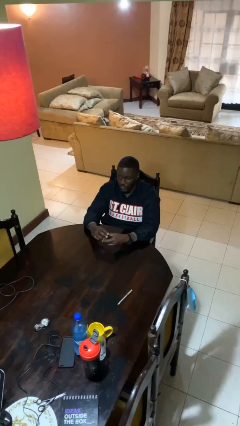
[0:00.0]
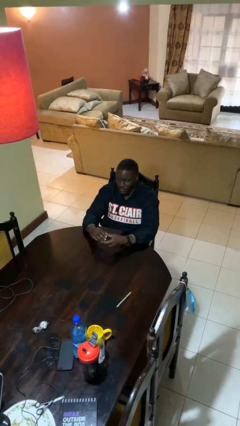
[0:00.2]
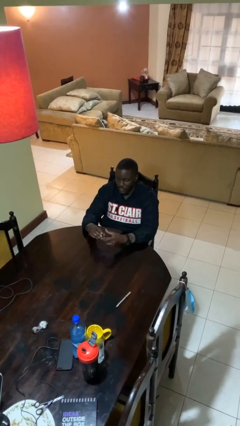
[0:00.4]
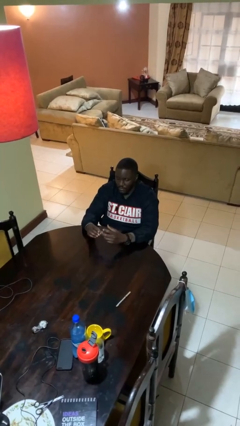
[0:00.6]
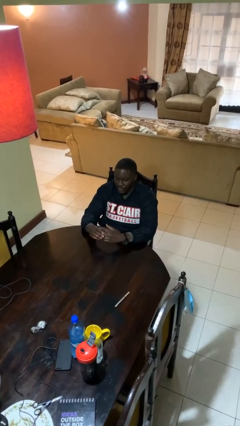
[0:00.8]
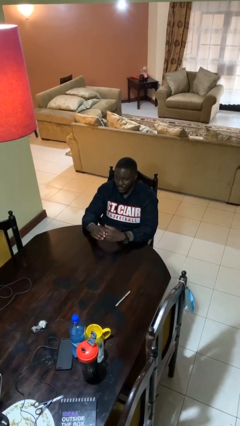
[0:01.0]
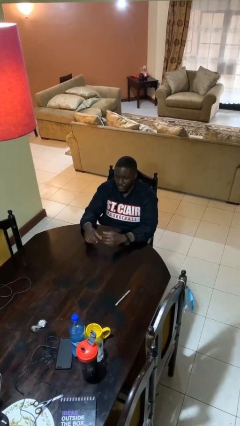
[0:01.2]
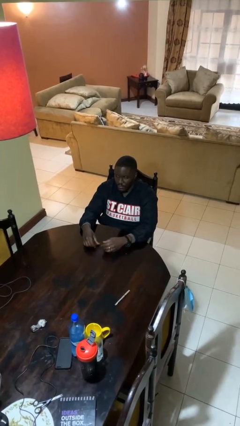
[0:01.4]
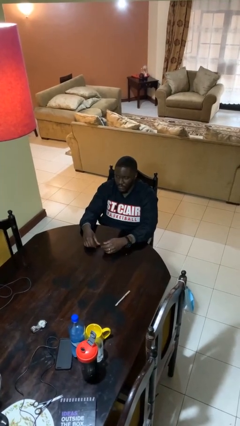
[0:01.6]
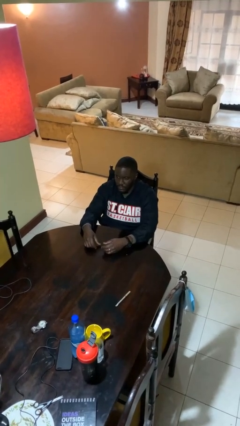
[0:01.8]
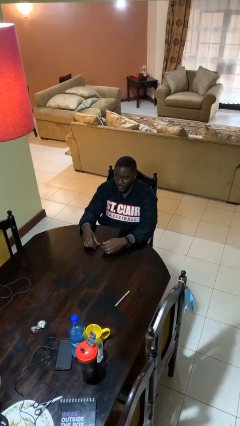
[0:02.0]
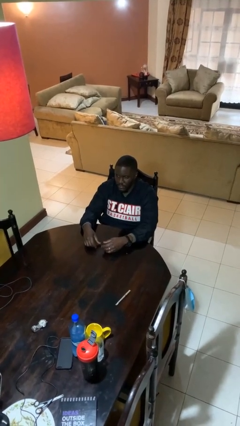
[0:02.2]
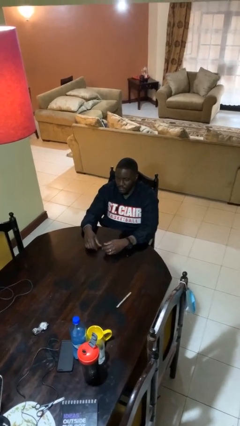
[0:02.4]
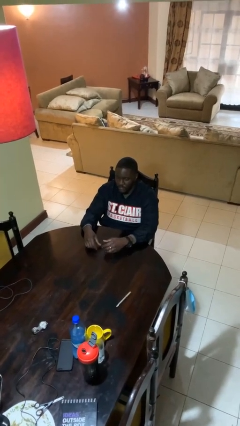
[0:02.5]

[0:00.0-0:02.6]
person puts on ring

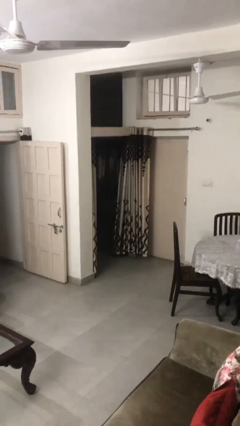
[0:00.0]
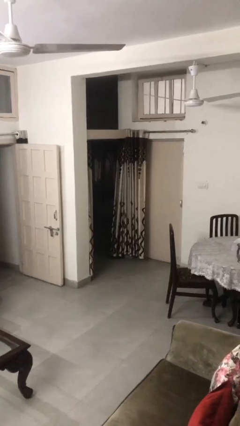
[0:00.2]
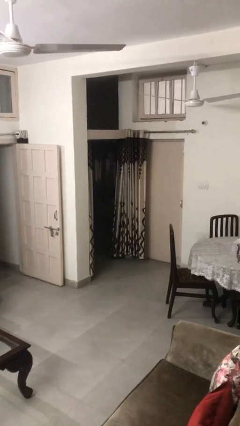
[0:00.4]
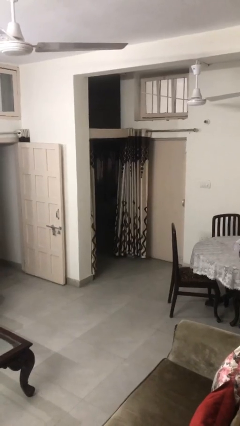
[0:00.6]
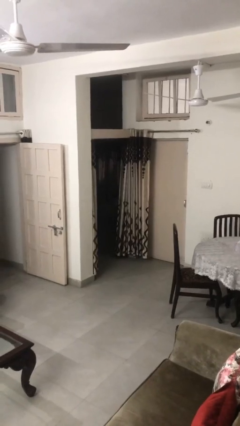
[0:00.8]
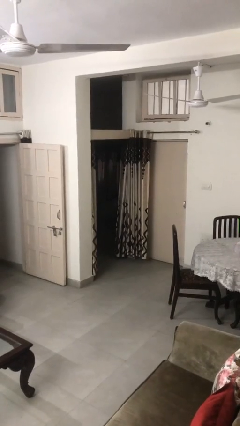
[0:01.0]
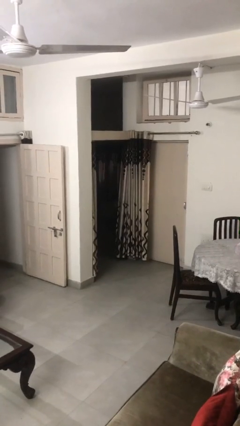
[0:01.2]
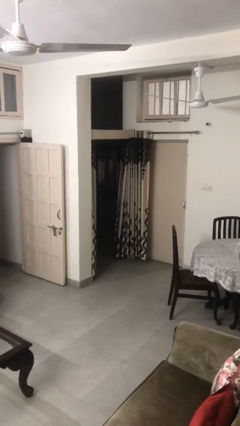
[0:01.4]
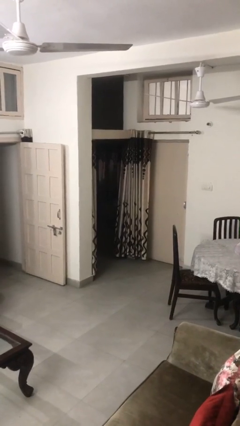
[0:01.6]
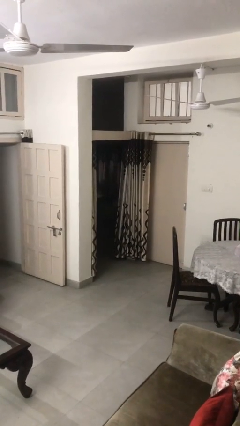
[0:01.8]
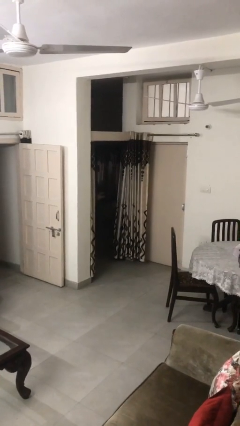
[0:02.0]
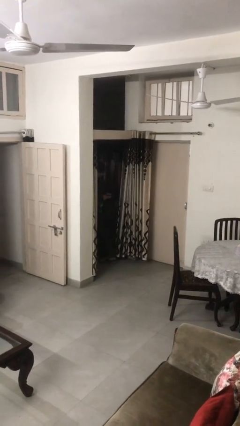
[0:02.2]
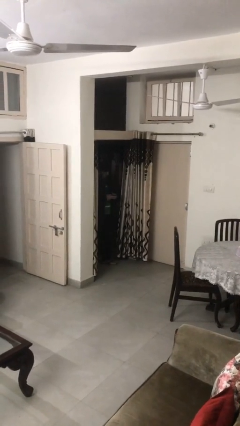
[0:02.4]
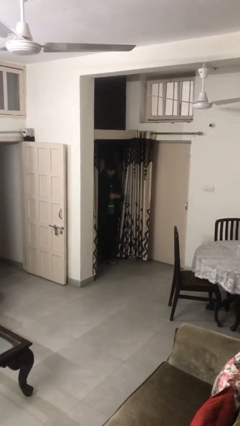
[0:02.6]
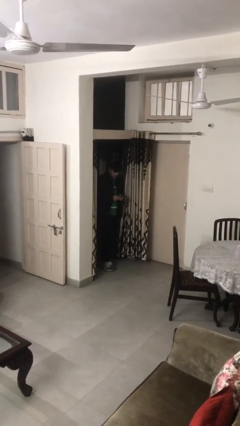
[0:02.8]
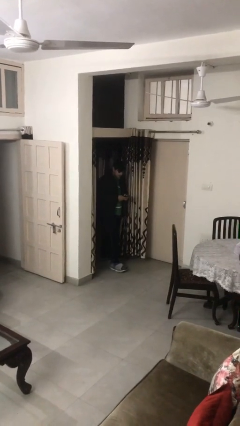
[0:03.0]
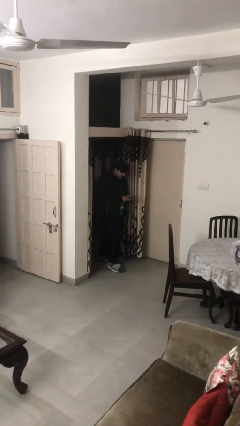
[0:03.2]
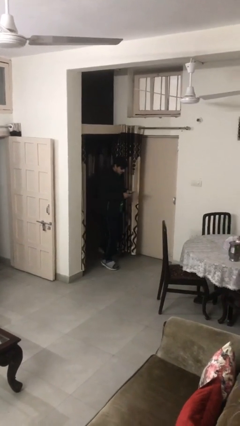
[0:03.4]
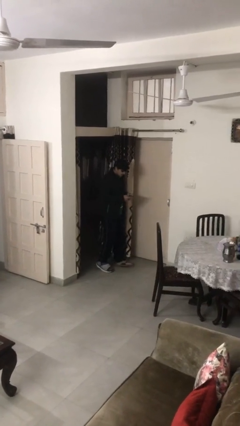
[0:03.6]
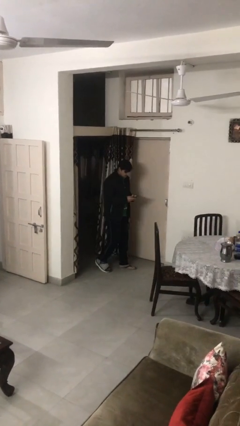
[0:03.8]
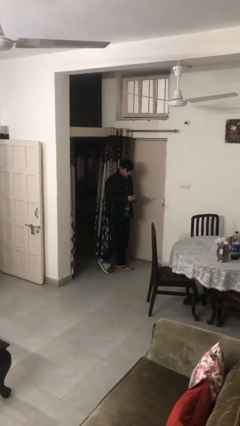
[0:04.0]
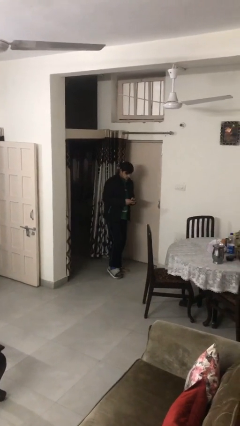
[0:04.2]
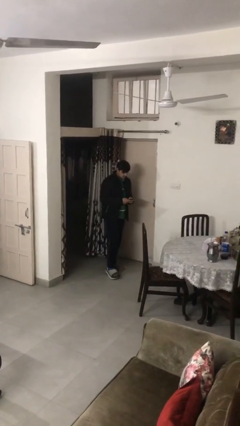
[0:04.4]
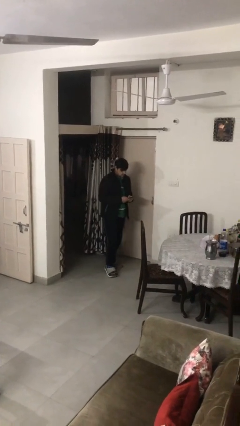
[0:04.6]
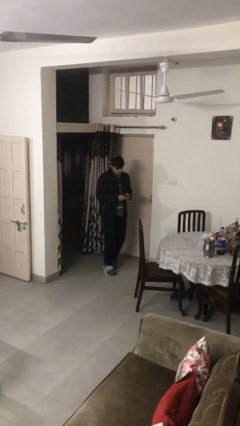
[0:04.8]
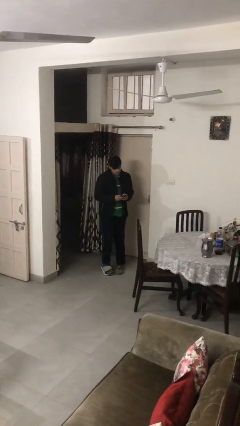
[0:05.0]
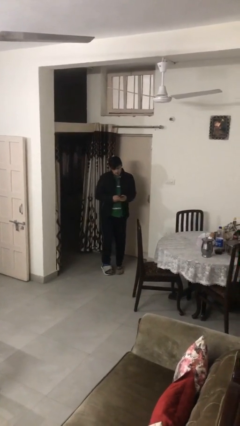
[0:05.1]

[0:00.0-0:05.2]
person enters scene through structure

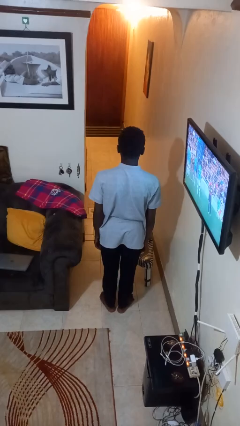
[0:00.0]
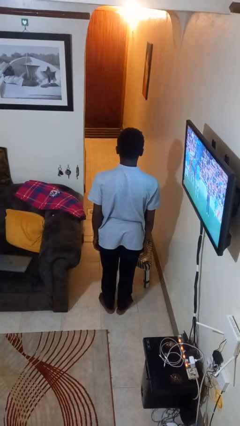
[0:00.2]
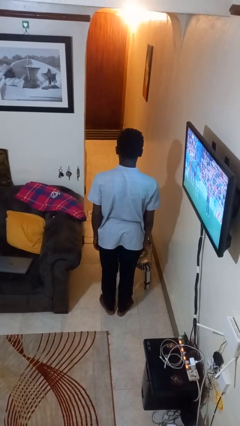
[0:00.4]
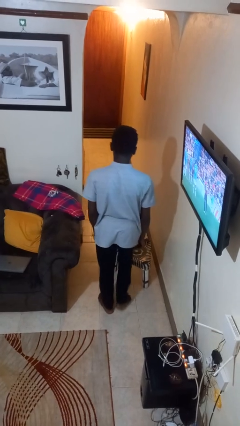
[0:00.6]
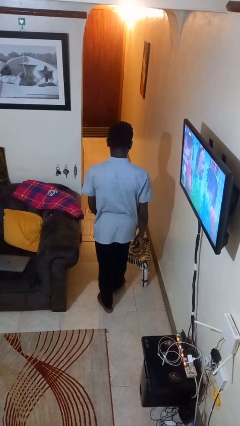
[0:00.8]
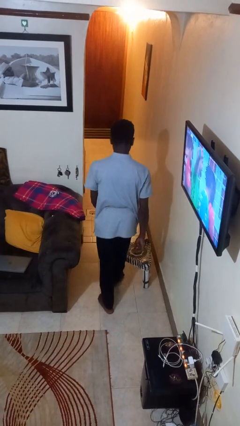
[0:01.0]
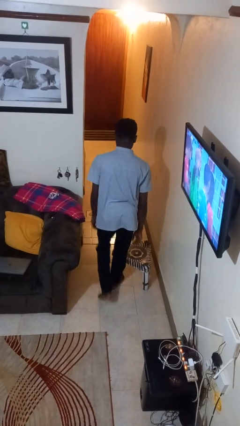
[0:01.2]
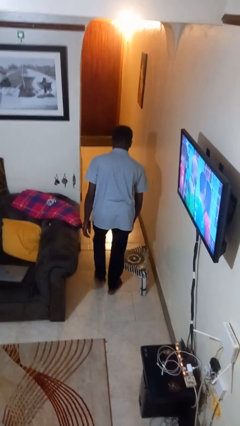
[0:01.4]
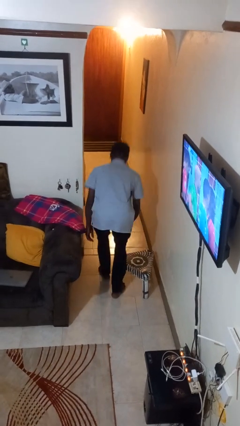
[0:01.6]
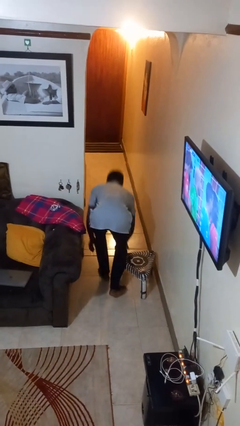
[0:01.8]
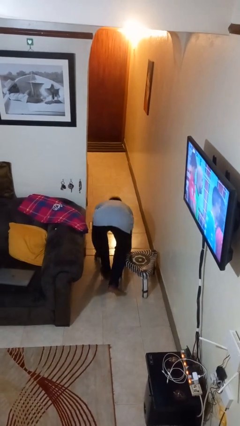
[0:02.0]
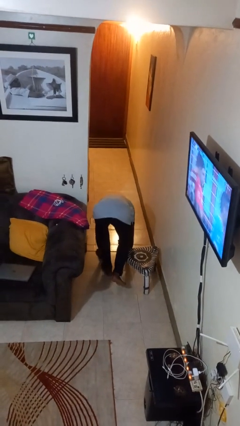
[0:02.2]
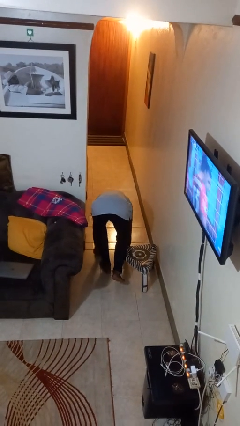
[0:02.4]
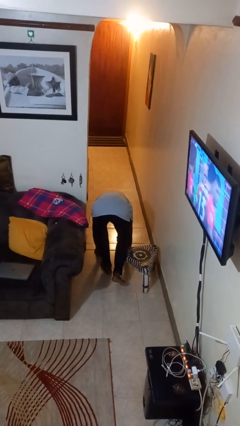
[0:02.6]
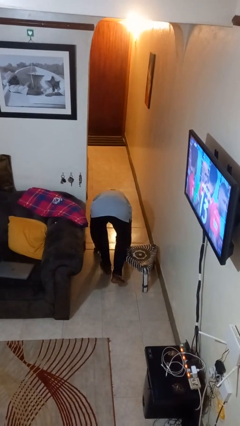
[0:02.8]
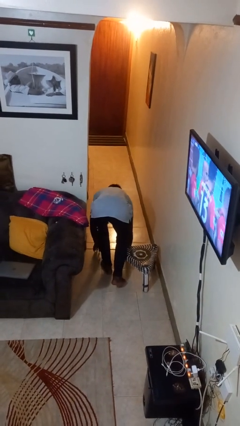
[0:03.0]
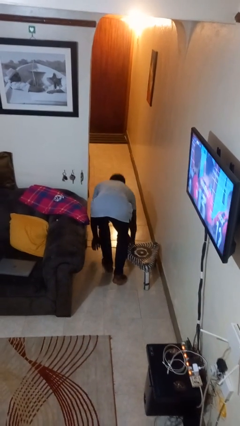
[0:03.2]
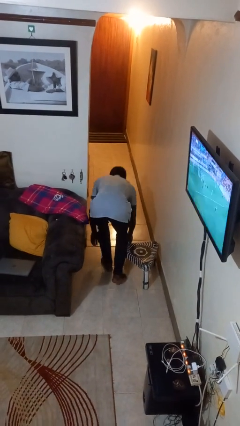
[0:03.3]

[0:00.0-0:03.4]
person trips on object on floor

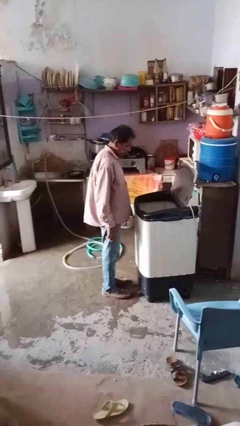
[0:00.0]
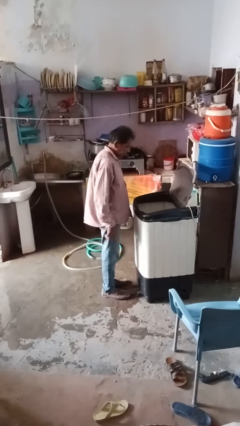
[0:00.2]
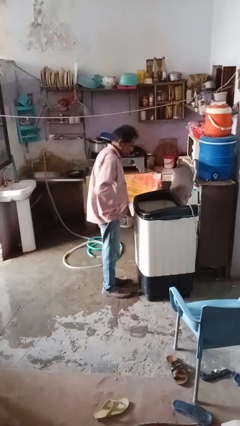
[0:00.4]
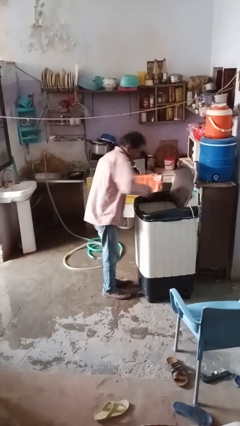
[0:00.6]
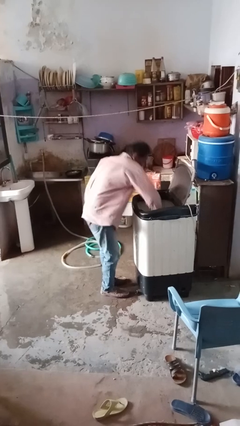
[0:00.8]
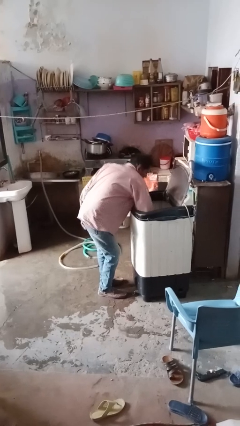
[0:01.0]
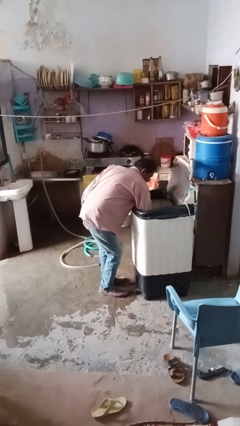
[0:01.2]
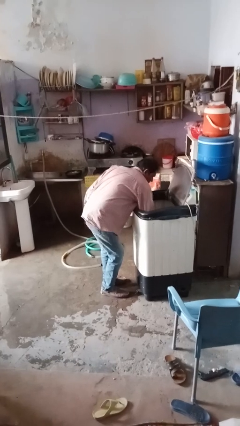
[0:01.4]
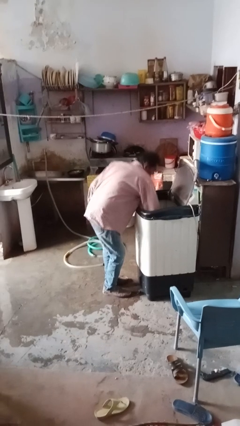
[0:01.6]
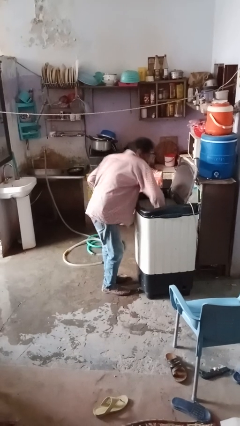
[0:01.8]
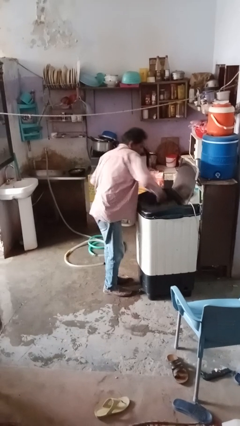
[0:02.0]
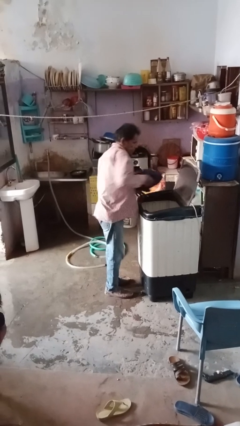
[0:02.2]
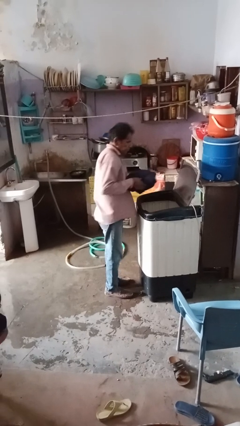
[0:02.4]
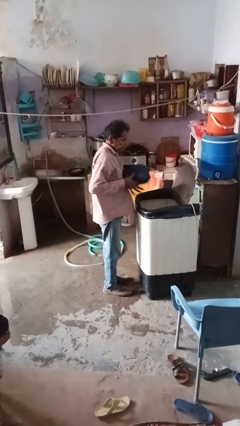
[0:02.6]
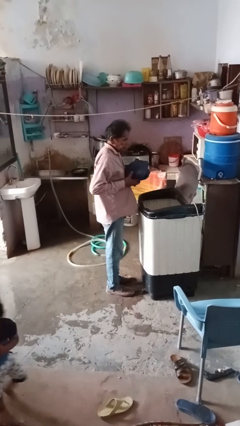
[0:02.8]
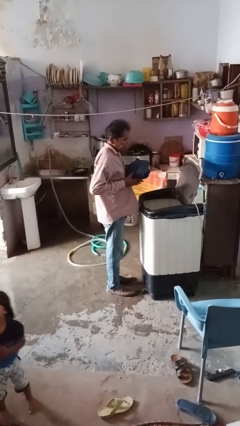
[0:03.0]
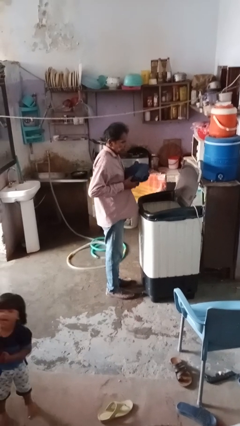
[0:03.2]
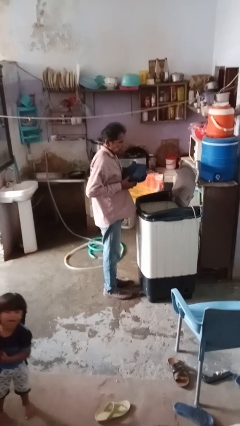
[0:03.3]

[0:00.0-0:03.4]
person unloads clotheswasher

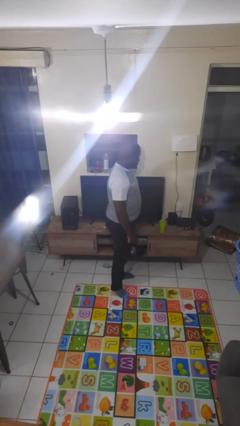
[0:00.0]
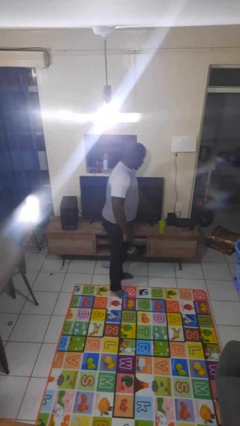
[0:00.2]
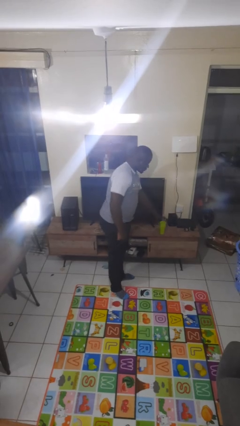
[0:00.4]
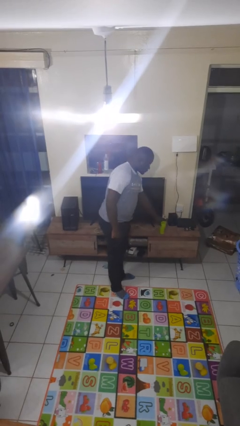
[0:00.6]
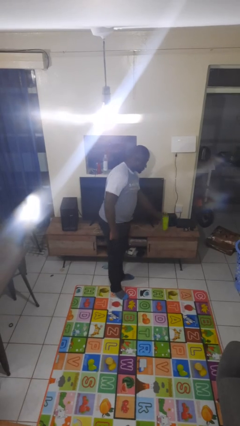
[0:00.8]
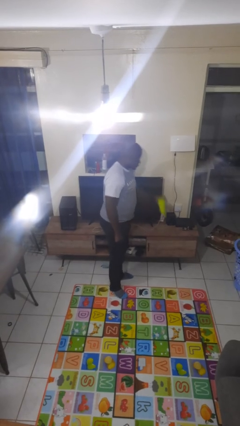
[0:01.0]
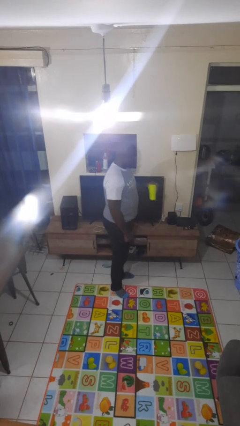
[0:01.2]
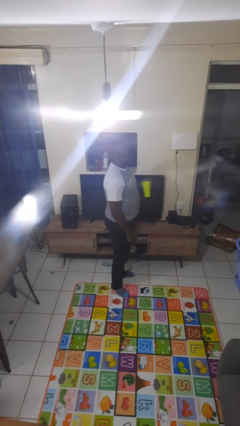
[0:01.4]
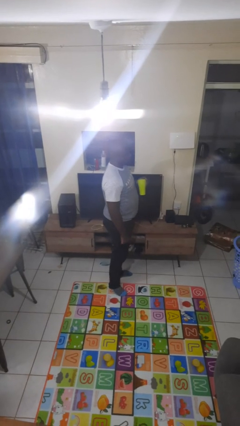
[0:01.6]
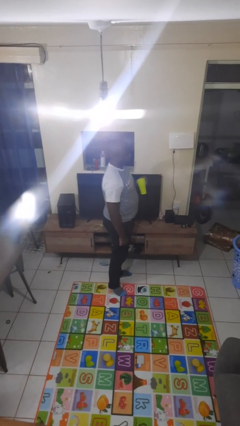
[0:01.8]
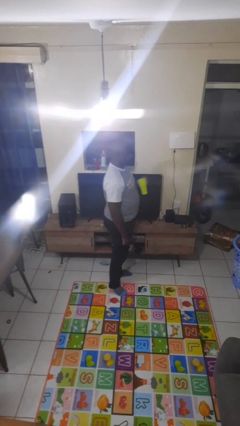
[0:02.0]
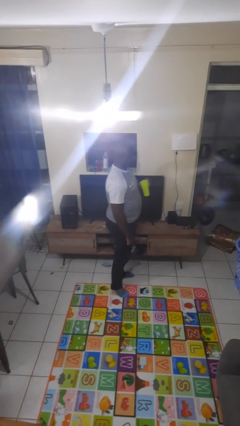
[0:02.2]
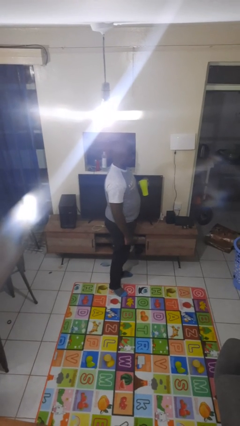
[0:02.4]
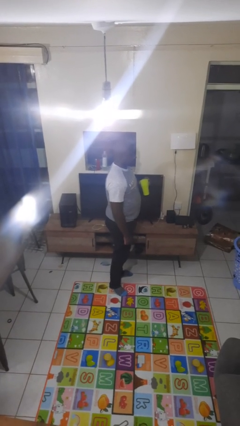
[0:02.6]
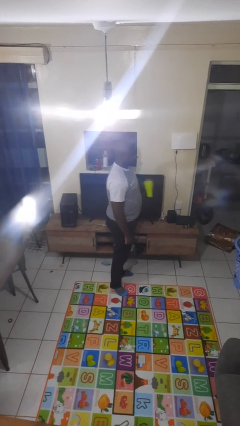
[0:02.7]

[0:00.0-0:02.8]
person picks up object from countertop

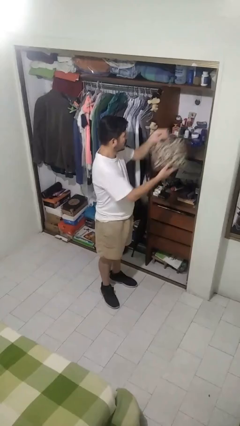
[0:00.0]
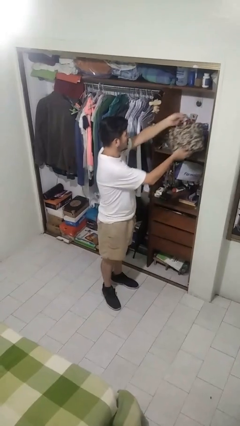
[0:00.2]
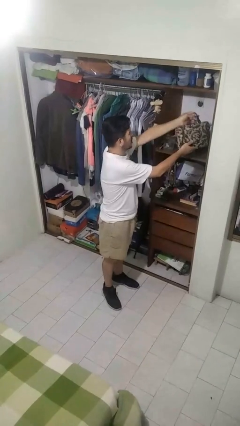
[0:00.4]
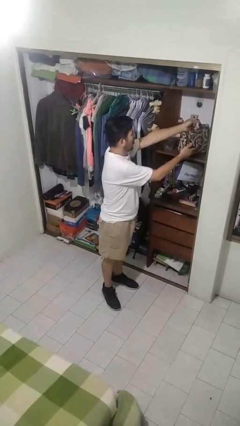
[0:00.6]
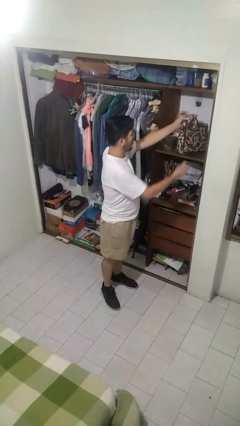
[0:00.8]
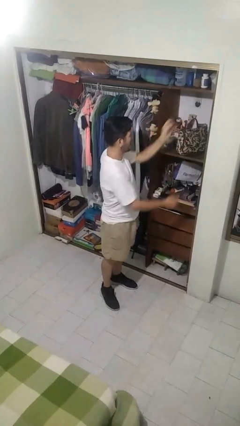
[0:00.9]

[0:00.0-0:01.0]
person picks up object from shelf
